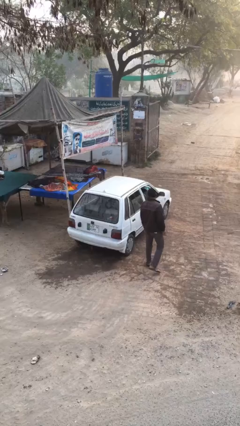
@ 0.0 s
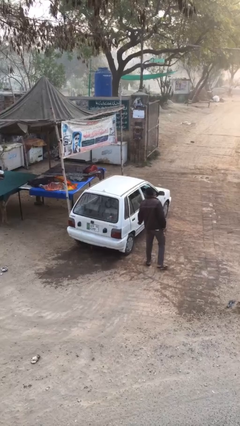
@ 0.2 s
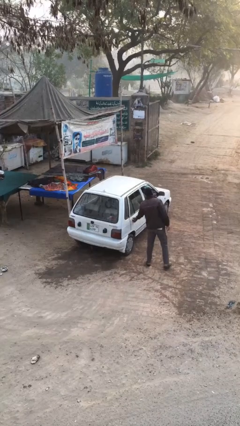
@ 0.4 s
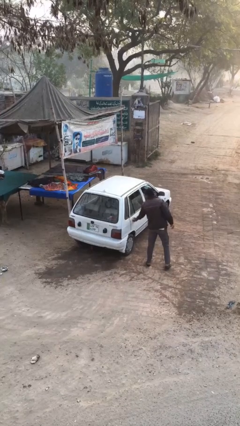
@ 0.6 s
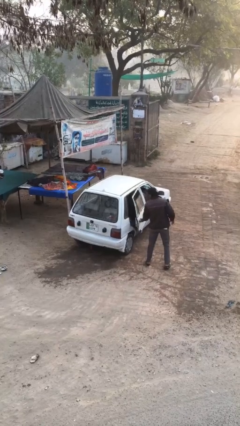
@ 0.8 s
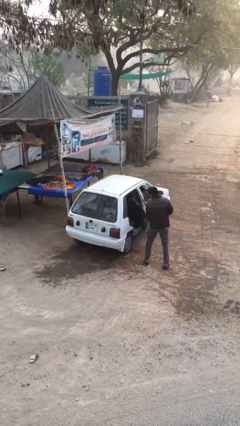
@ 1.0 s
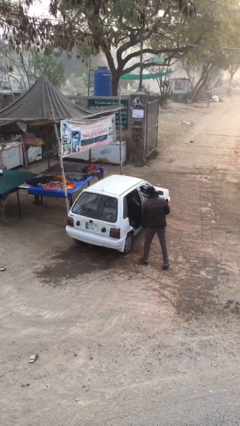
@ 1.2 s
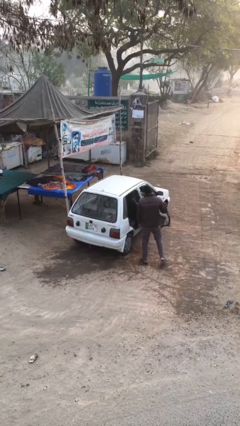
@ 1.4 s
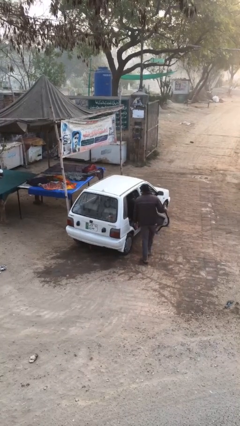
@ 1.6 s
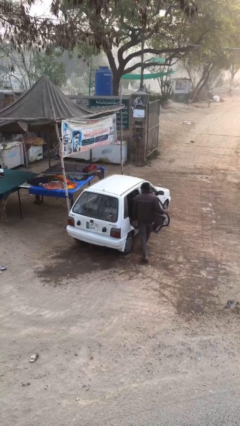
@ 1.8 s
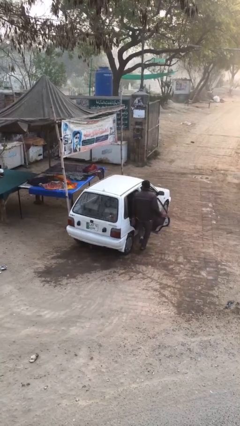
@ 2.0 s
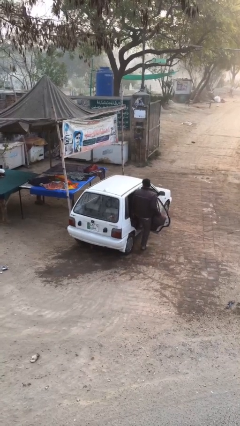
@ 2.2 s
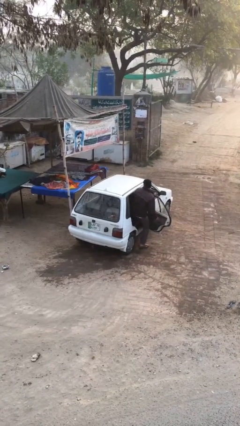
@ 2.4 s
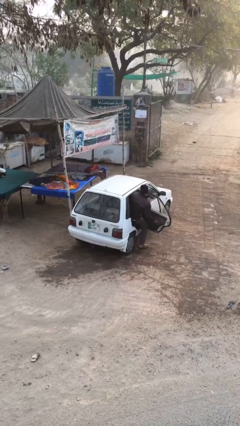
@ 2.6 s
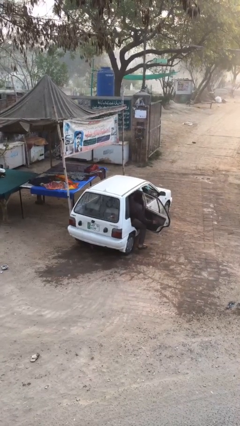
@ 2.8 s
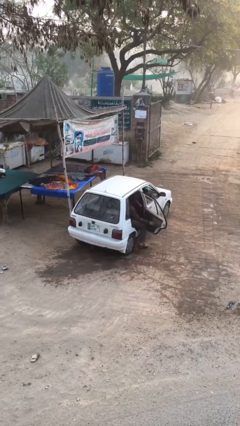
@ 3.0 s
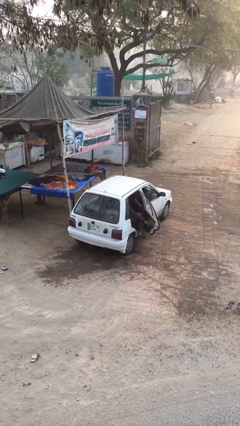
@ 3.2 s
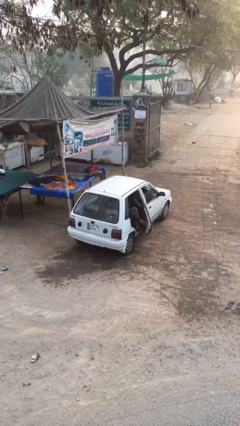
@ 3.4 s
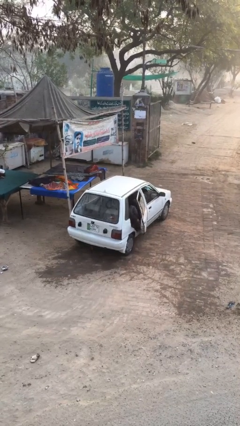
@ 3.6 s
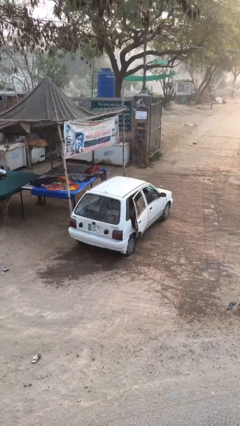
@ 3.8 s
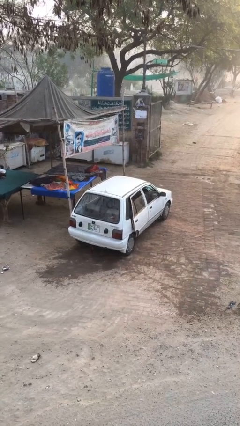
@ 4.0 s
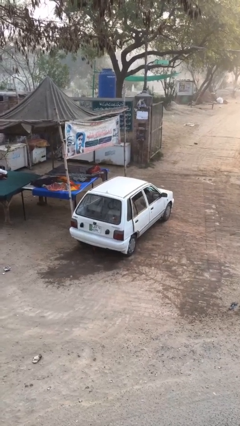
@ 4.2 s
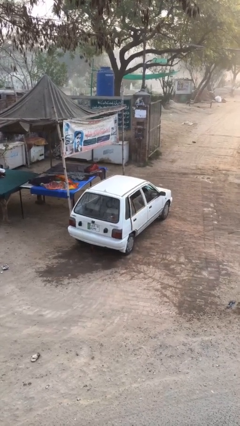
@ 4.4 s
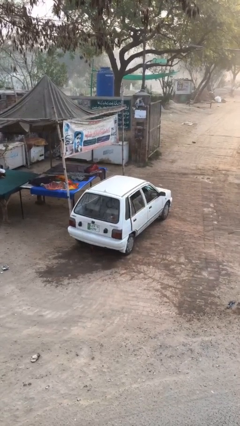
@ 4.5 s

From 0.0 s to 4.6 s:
car picks up person

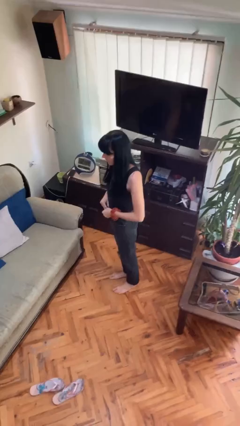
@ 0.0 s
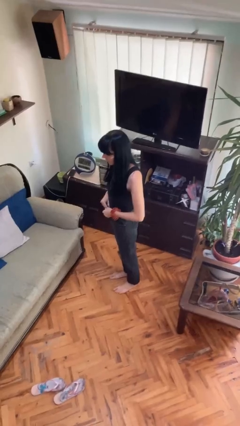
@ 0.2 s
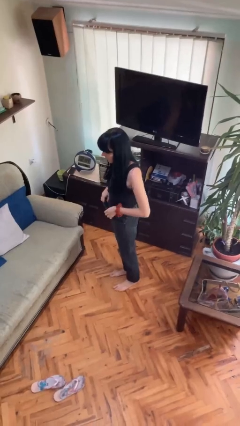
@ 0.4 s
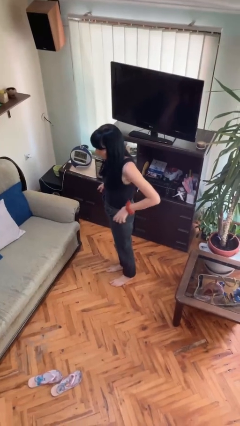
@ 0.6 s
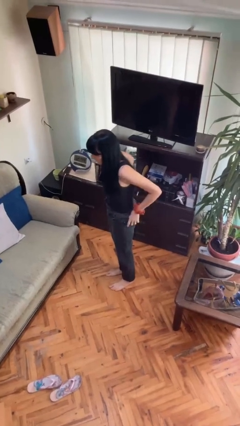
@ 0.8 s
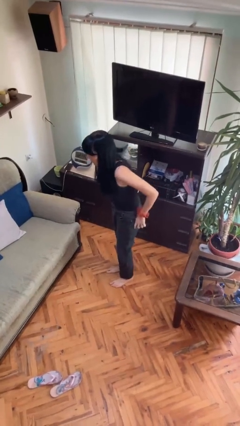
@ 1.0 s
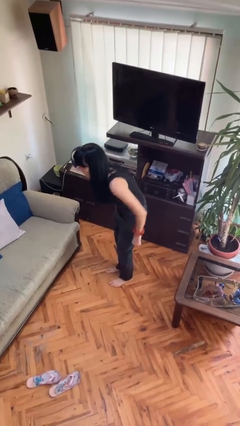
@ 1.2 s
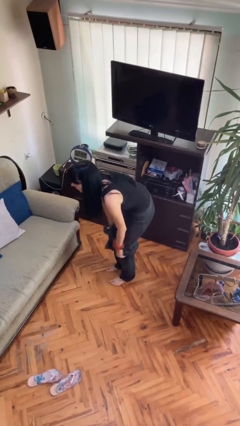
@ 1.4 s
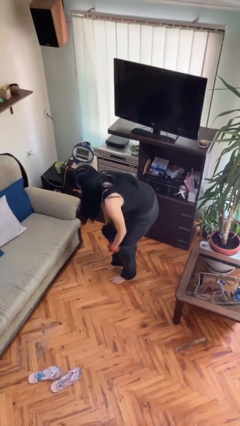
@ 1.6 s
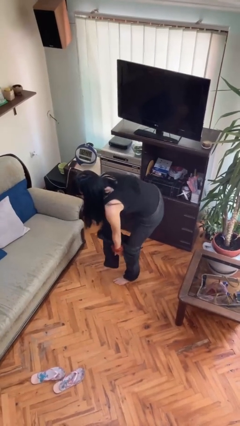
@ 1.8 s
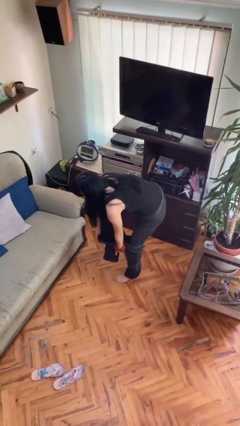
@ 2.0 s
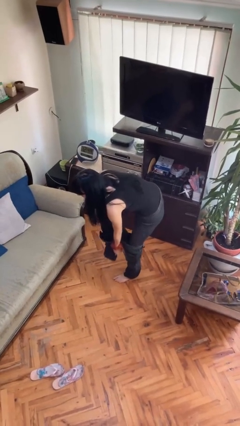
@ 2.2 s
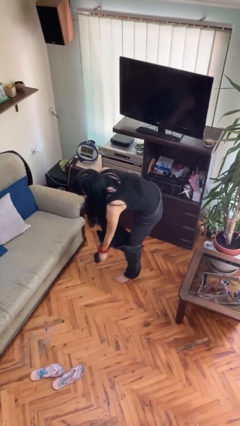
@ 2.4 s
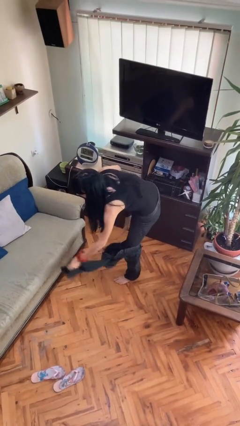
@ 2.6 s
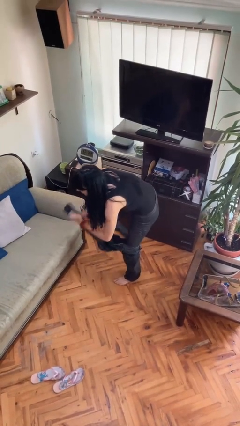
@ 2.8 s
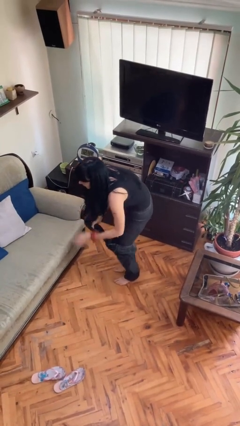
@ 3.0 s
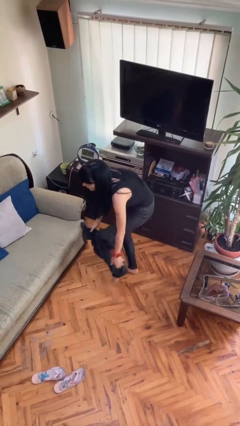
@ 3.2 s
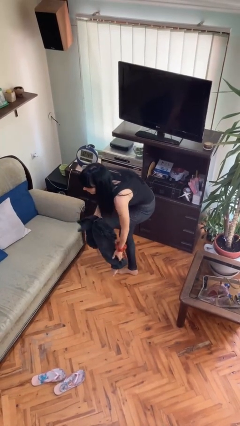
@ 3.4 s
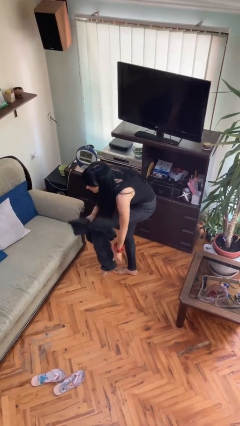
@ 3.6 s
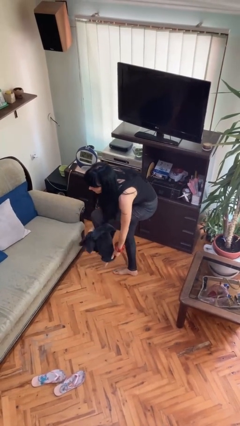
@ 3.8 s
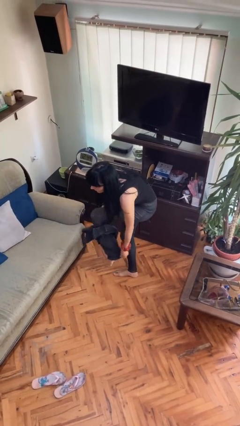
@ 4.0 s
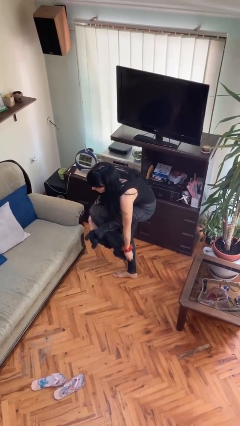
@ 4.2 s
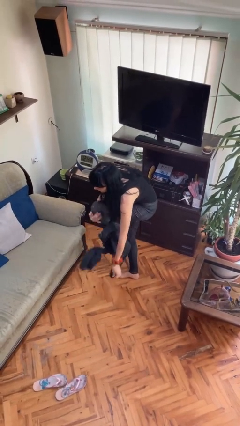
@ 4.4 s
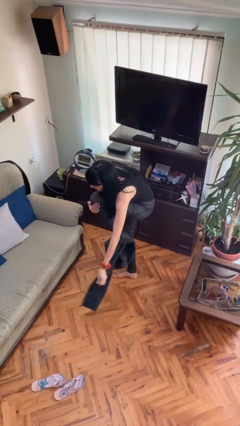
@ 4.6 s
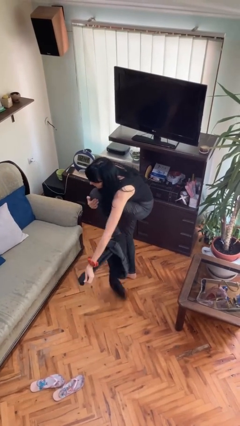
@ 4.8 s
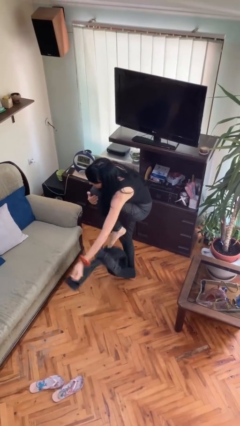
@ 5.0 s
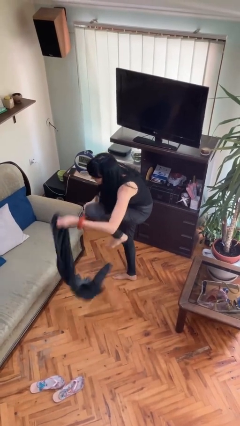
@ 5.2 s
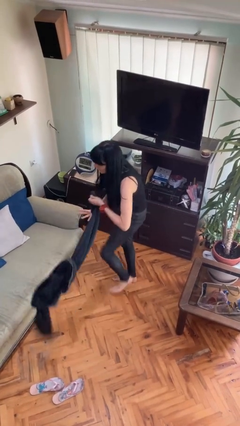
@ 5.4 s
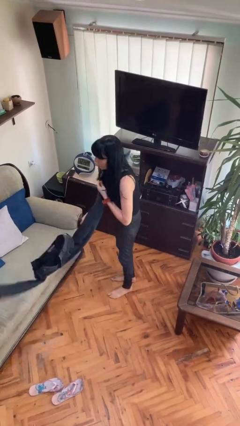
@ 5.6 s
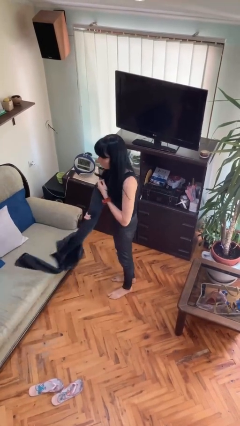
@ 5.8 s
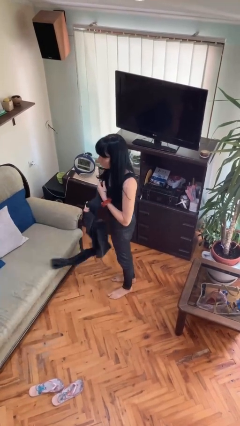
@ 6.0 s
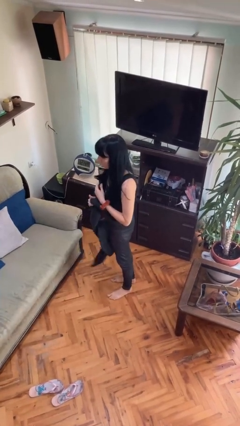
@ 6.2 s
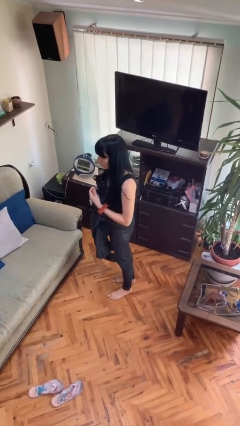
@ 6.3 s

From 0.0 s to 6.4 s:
person takes off pants

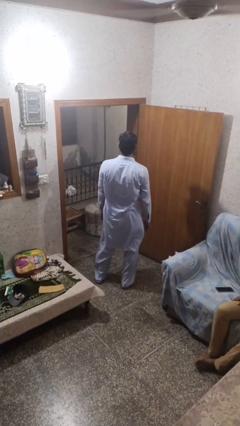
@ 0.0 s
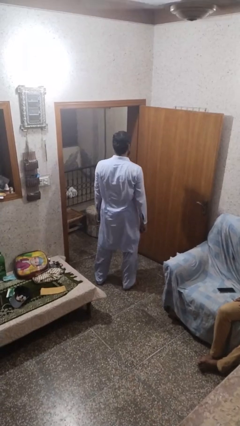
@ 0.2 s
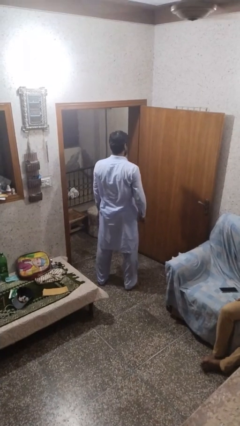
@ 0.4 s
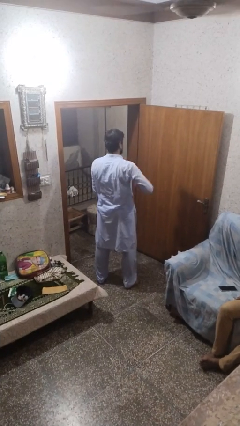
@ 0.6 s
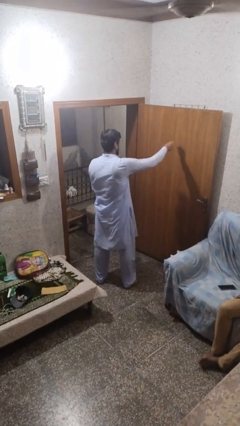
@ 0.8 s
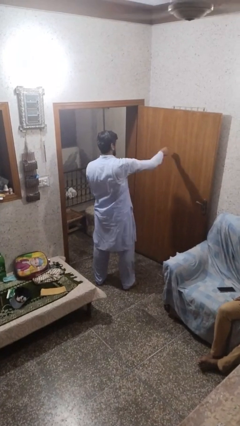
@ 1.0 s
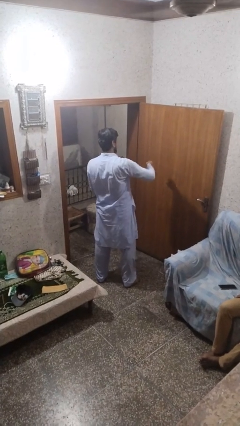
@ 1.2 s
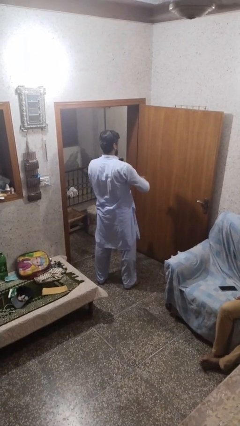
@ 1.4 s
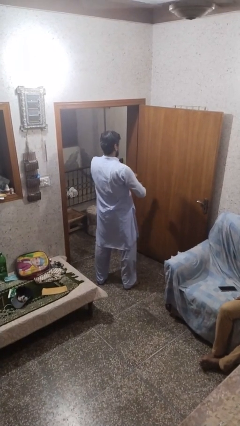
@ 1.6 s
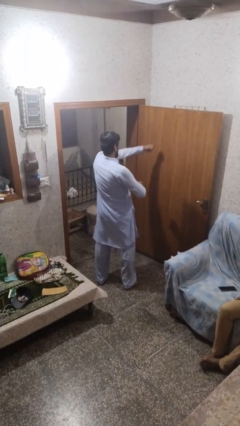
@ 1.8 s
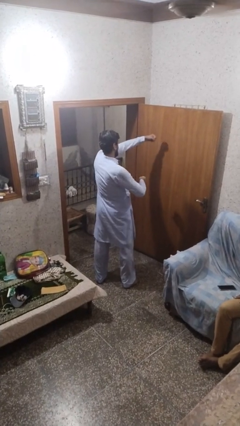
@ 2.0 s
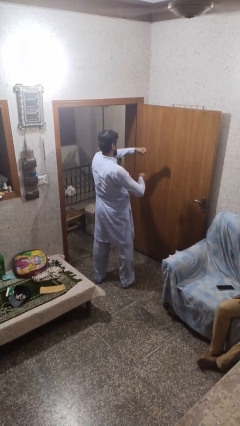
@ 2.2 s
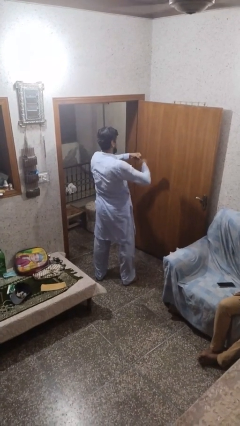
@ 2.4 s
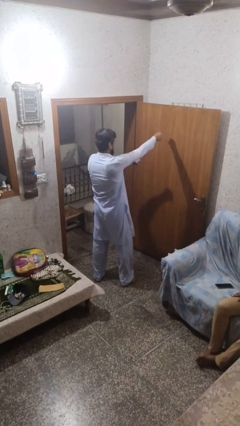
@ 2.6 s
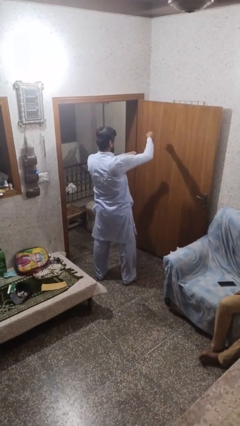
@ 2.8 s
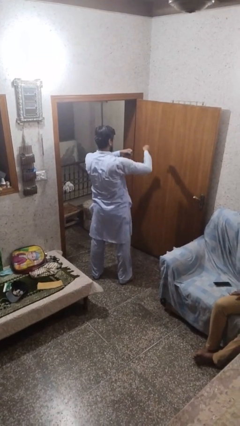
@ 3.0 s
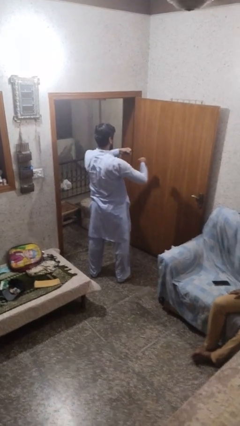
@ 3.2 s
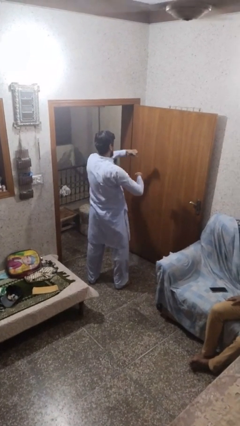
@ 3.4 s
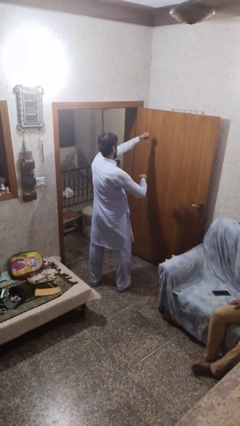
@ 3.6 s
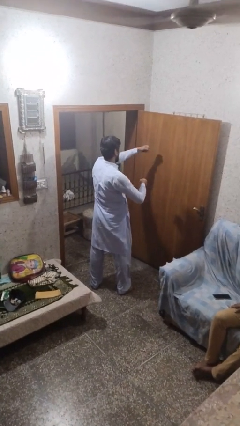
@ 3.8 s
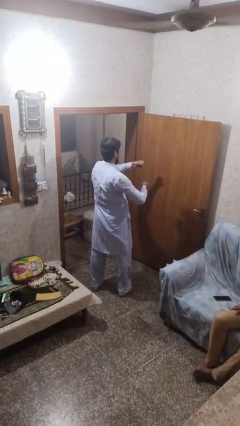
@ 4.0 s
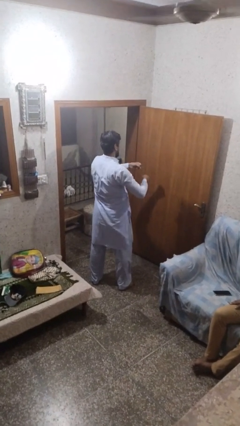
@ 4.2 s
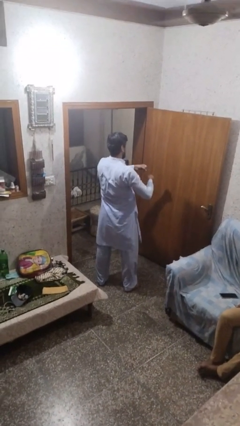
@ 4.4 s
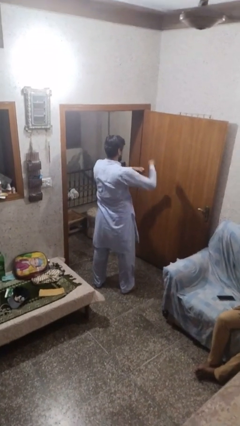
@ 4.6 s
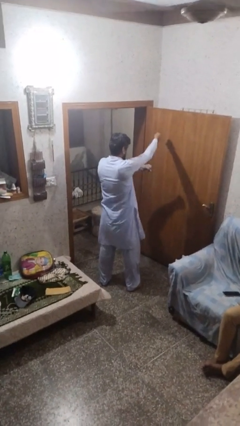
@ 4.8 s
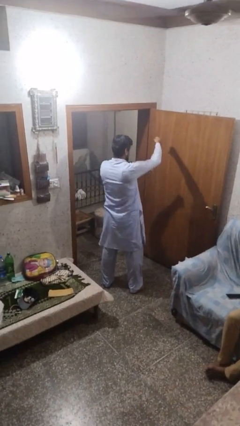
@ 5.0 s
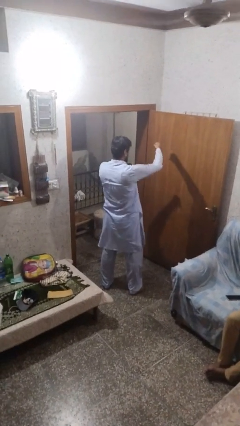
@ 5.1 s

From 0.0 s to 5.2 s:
person punches

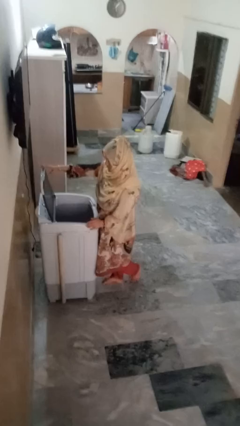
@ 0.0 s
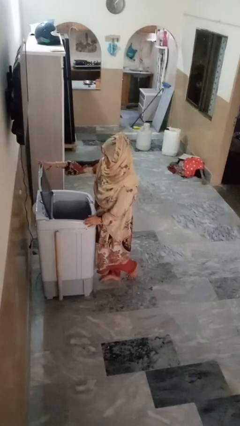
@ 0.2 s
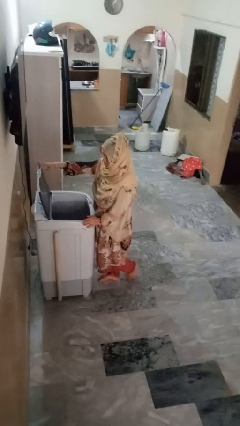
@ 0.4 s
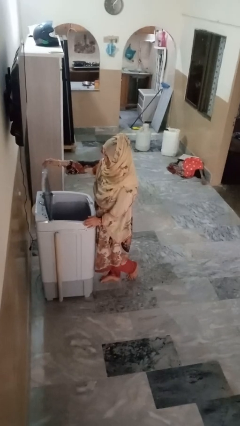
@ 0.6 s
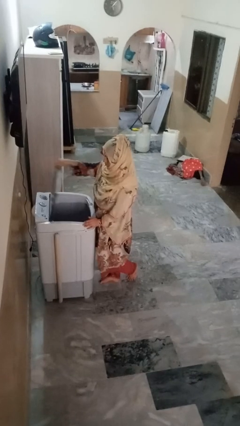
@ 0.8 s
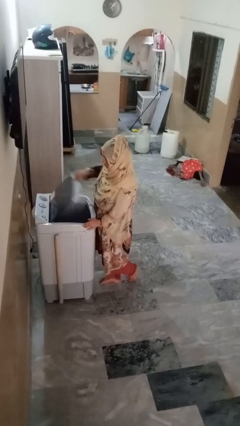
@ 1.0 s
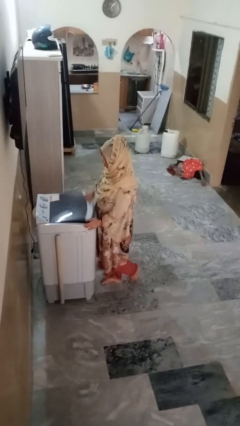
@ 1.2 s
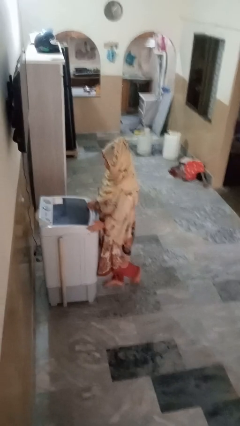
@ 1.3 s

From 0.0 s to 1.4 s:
person closes clothes washer
